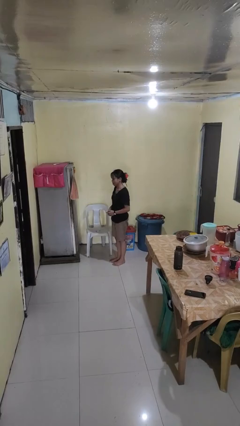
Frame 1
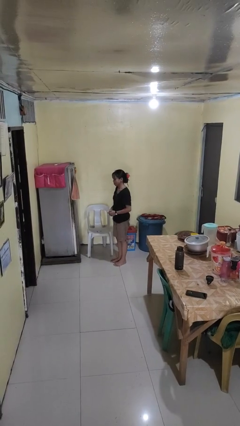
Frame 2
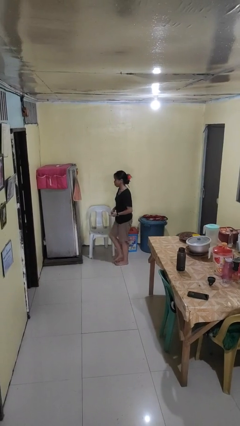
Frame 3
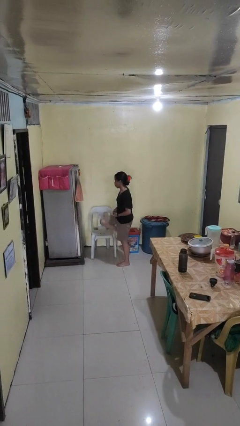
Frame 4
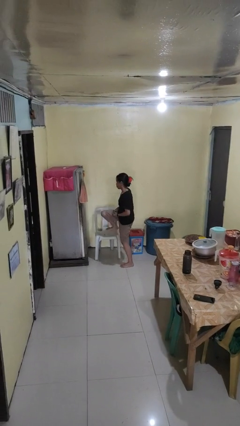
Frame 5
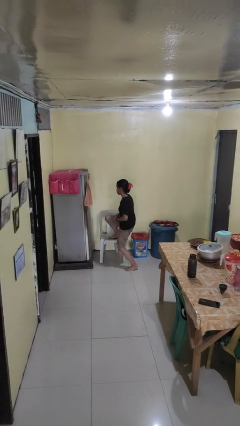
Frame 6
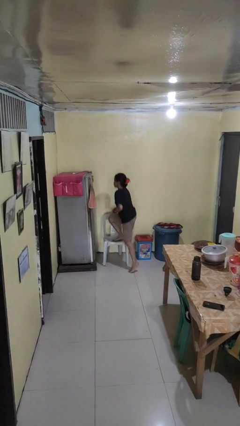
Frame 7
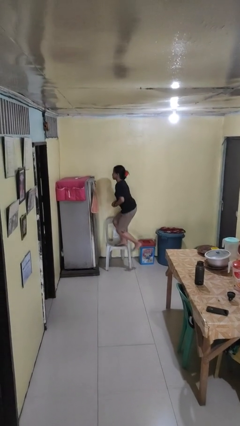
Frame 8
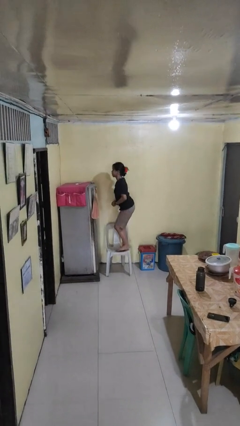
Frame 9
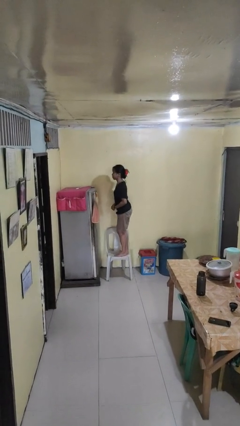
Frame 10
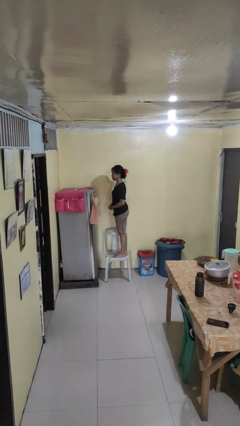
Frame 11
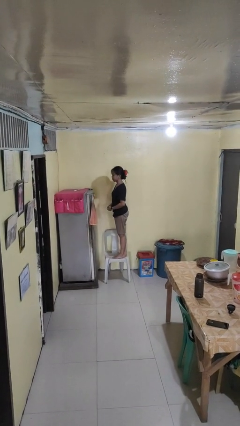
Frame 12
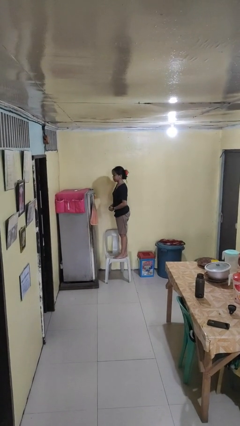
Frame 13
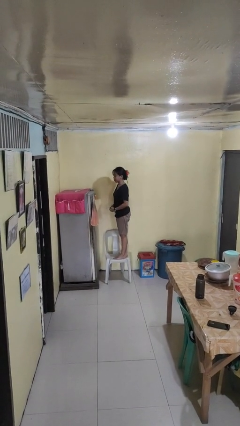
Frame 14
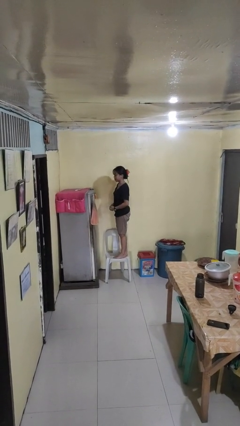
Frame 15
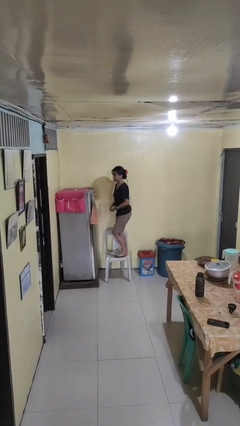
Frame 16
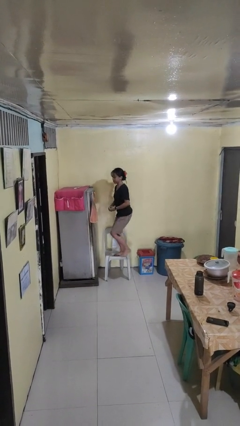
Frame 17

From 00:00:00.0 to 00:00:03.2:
person climbs on chair

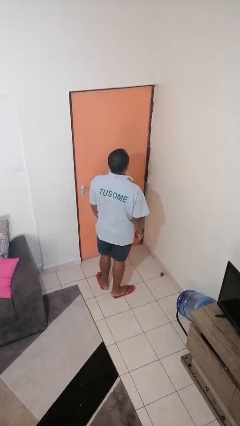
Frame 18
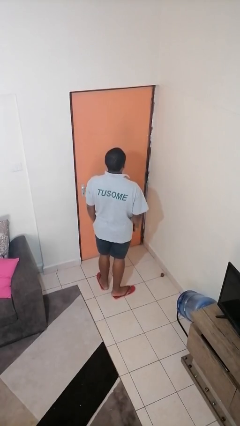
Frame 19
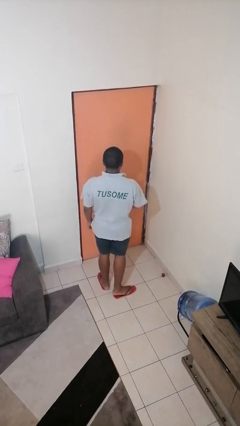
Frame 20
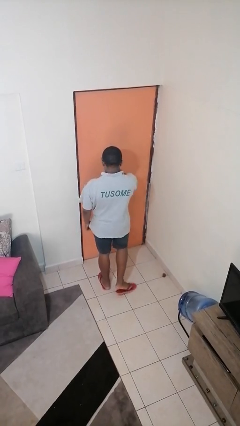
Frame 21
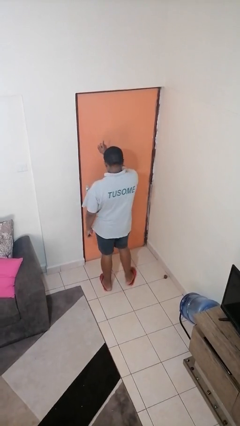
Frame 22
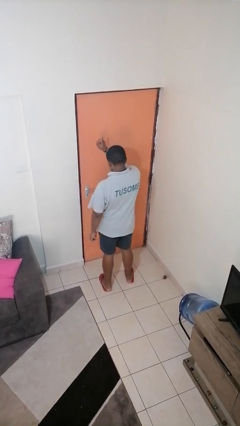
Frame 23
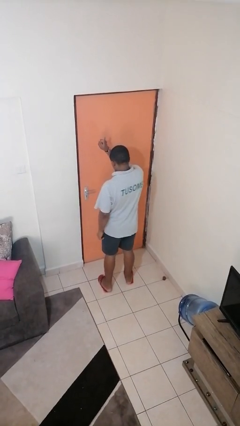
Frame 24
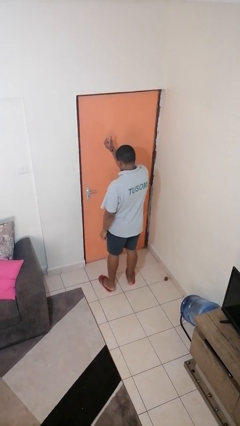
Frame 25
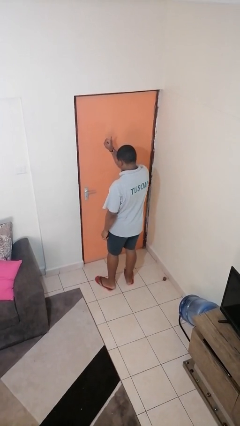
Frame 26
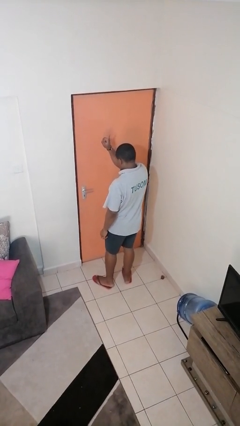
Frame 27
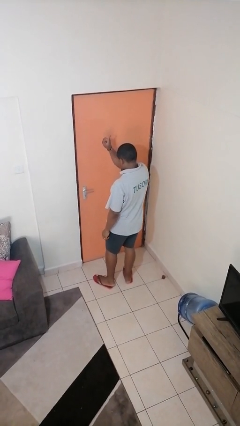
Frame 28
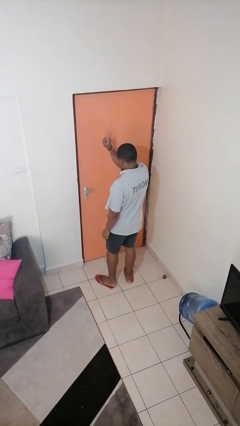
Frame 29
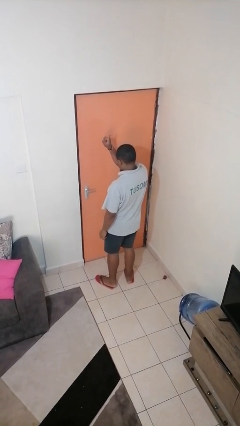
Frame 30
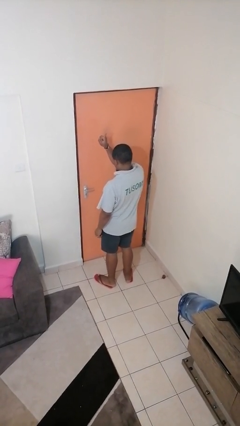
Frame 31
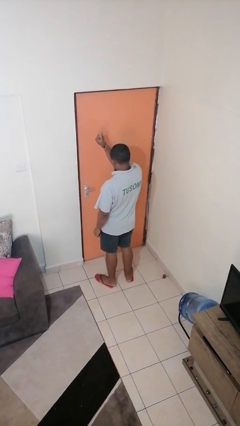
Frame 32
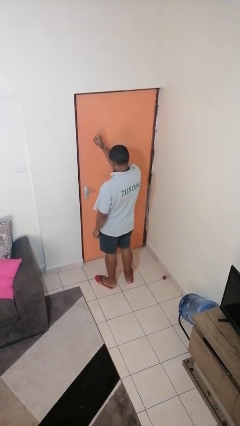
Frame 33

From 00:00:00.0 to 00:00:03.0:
person gestures number one

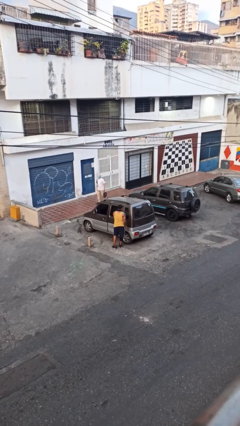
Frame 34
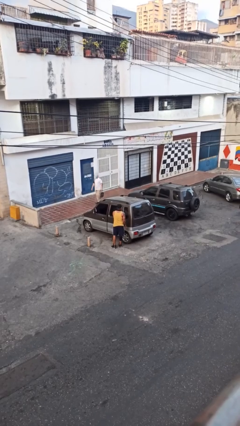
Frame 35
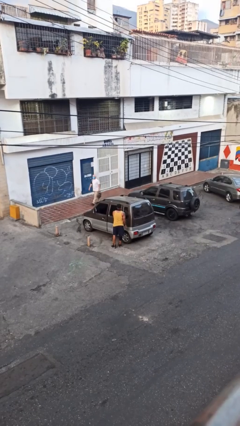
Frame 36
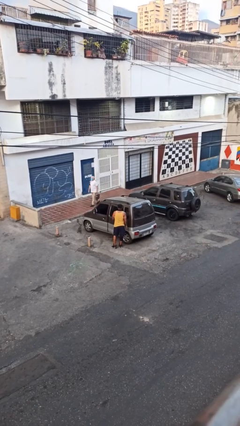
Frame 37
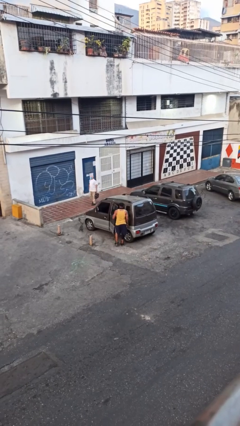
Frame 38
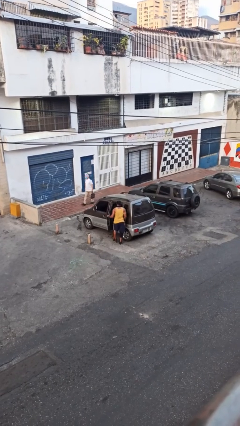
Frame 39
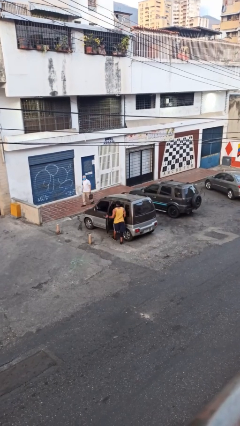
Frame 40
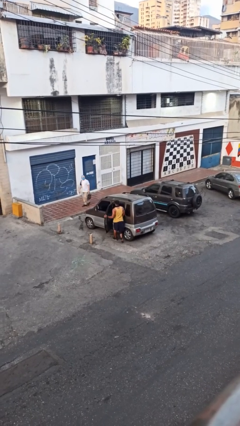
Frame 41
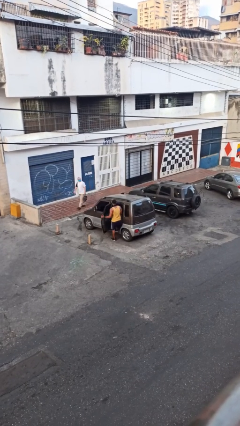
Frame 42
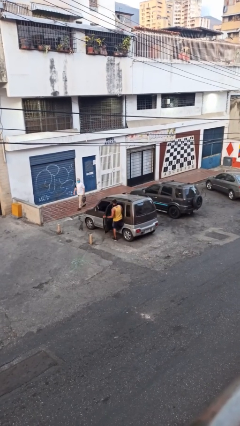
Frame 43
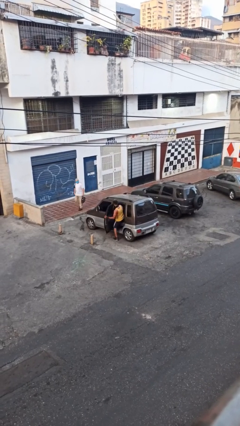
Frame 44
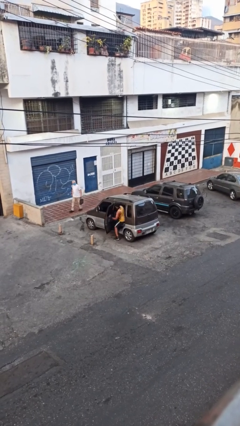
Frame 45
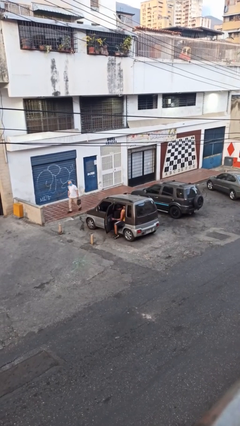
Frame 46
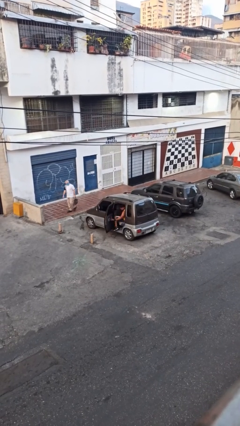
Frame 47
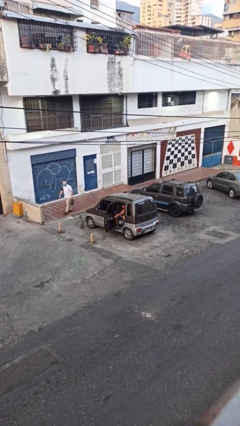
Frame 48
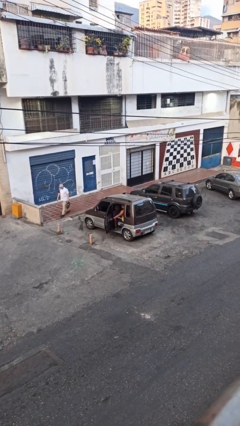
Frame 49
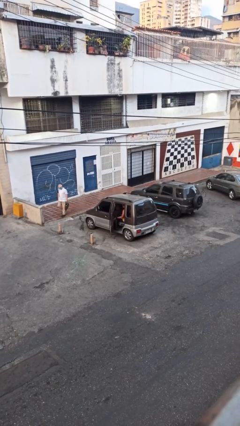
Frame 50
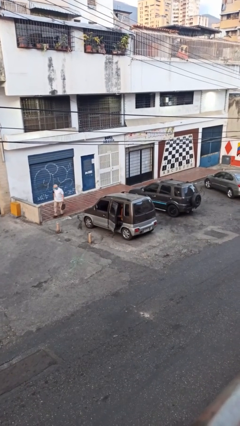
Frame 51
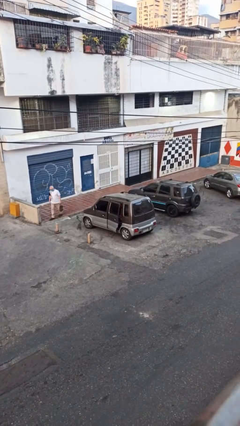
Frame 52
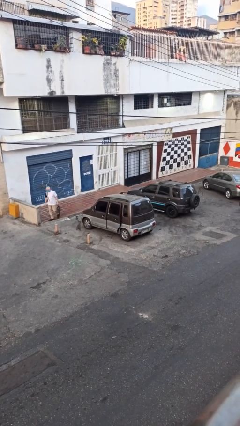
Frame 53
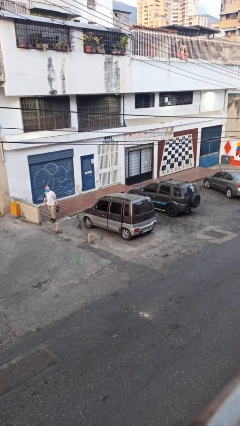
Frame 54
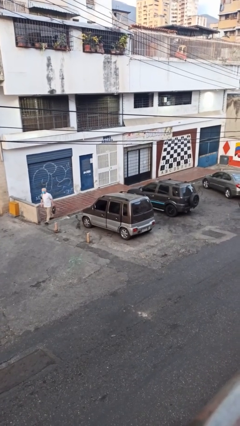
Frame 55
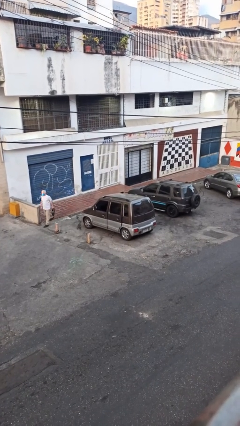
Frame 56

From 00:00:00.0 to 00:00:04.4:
car picks up person

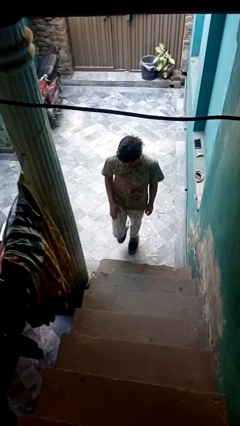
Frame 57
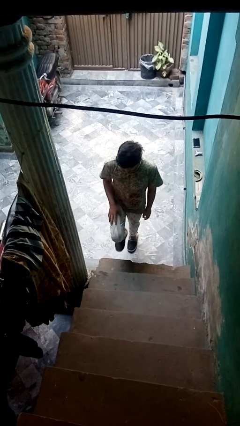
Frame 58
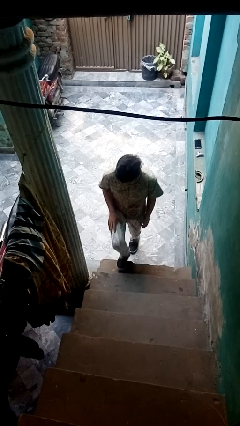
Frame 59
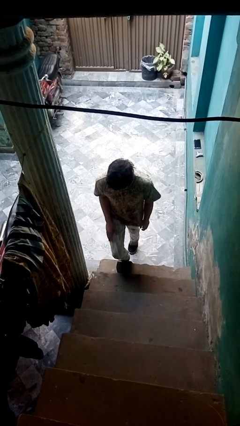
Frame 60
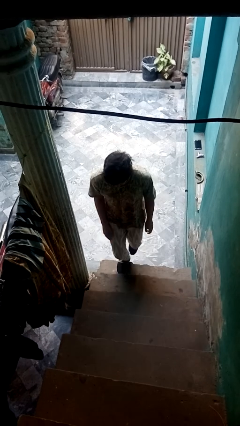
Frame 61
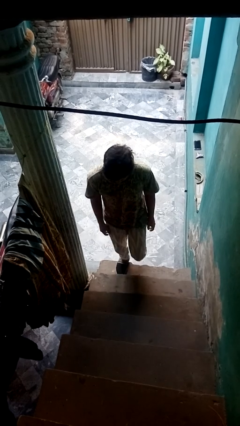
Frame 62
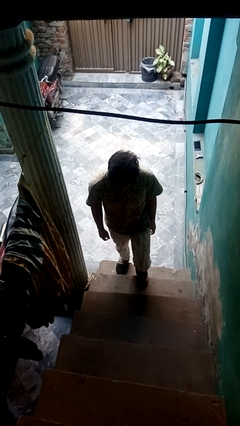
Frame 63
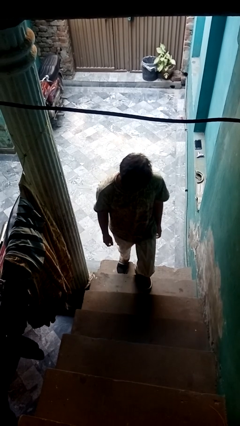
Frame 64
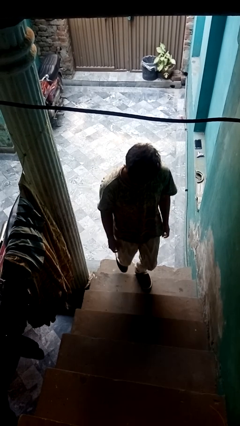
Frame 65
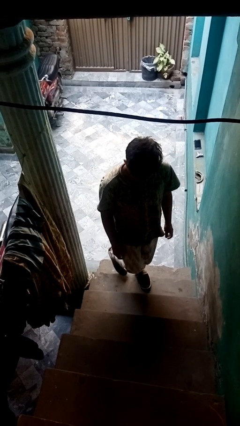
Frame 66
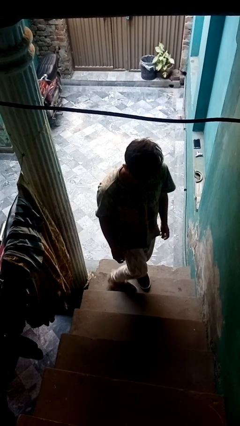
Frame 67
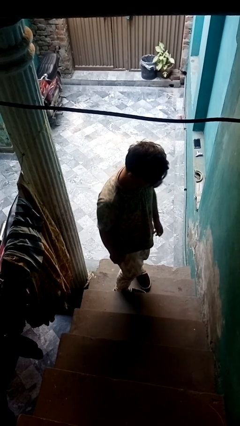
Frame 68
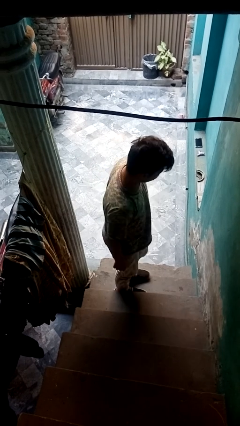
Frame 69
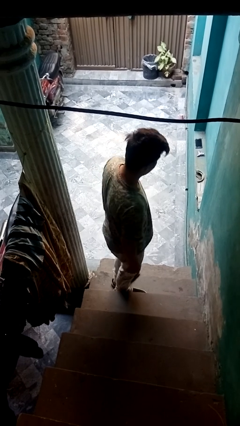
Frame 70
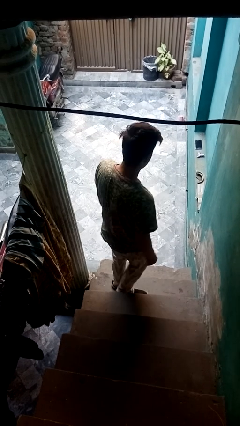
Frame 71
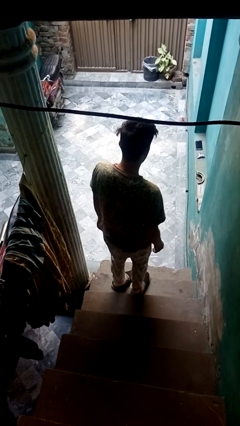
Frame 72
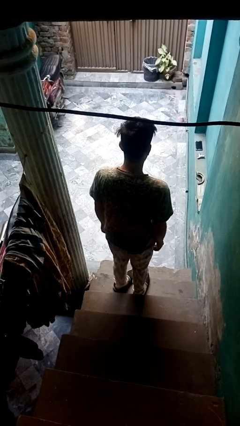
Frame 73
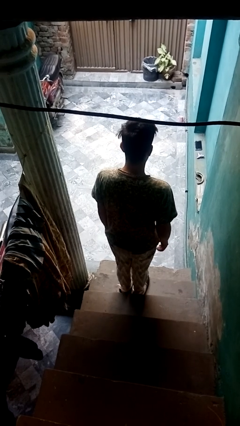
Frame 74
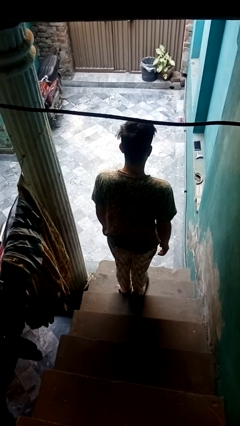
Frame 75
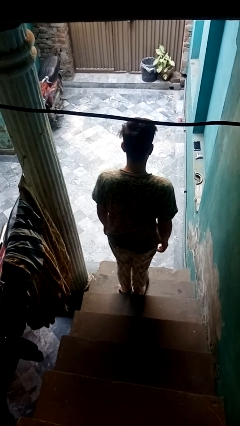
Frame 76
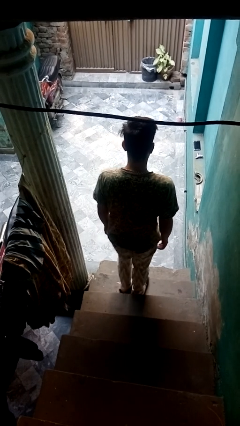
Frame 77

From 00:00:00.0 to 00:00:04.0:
person climbs up stairs

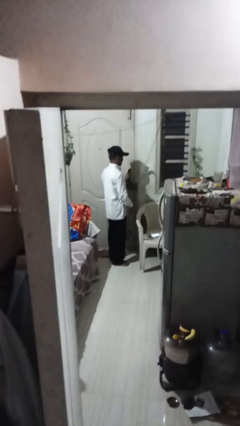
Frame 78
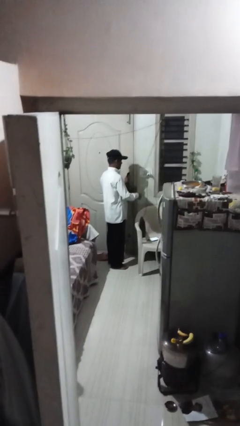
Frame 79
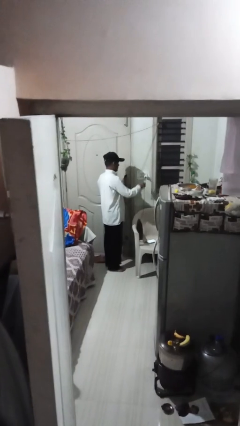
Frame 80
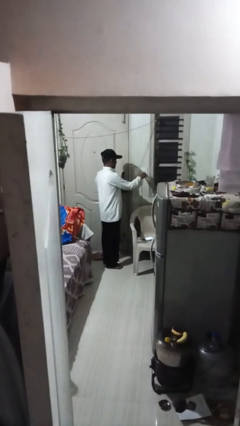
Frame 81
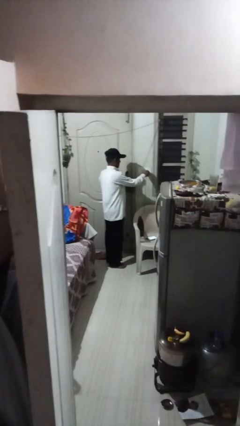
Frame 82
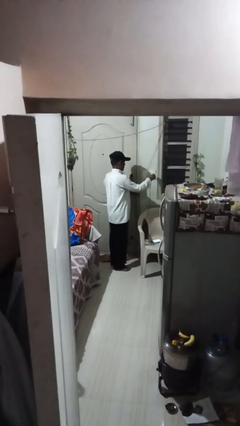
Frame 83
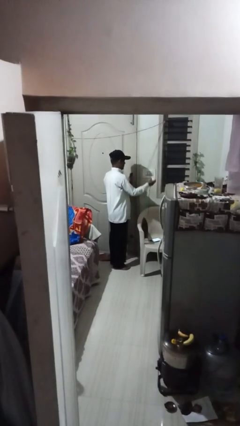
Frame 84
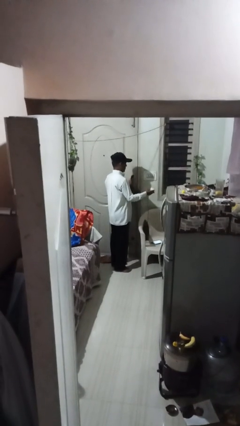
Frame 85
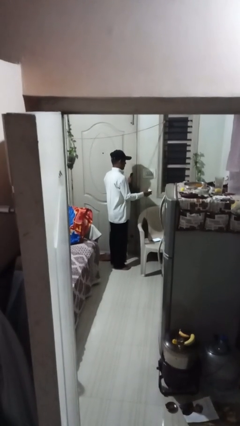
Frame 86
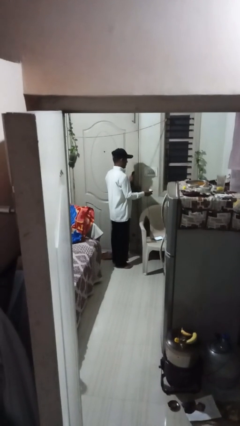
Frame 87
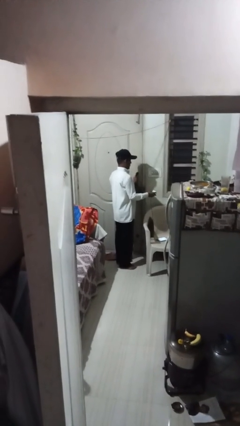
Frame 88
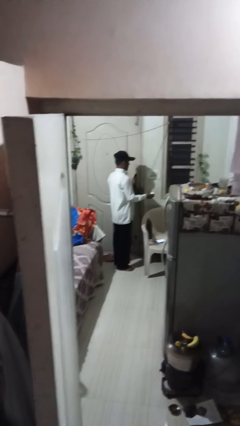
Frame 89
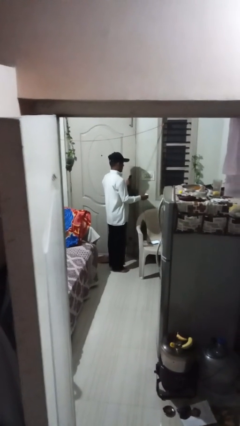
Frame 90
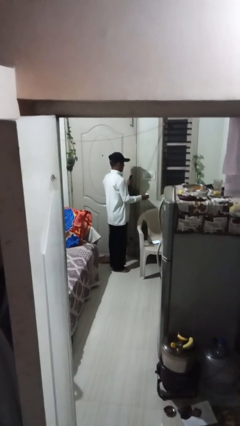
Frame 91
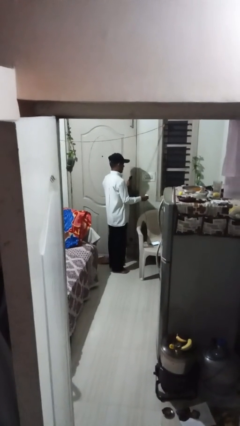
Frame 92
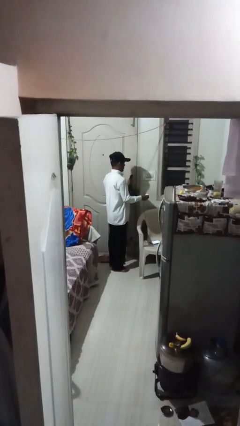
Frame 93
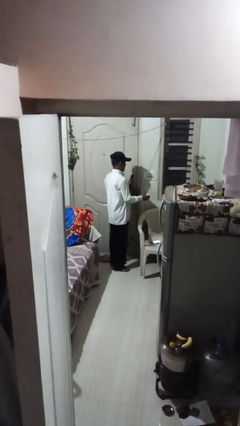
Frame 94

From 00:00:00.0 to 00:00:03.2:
person unplugs from electrical socket
